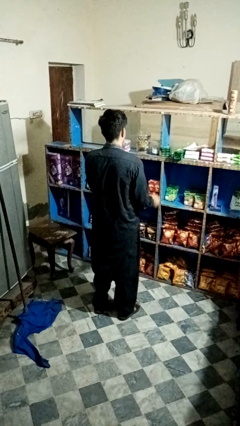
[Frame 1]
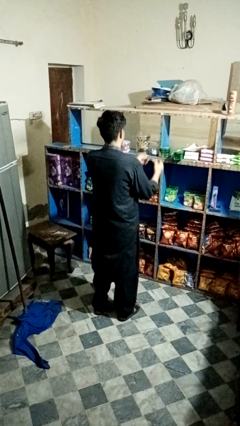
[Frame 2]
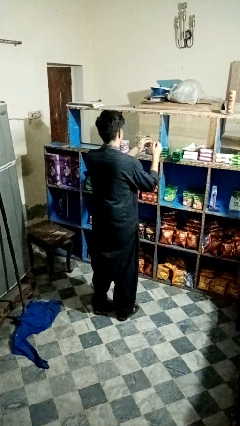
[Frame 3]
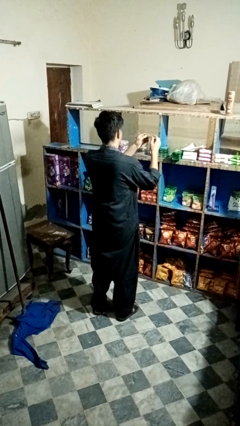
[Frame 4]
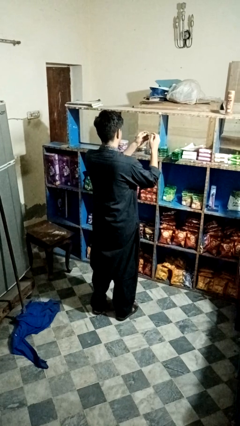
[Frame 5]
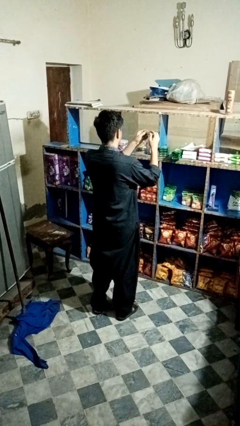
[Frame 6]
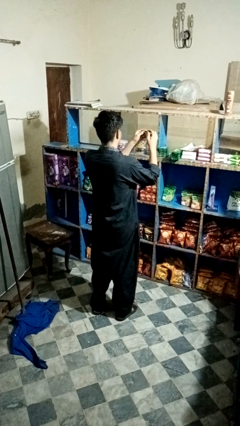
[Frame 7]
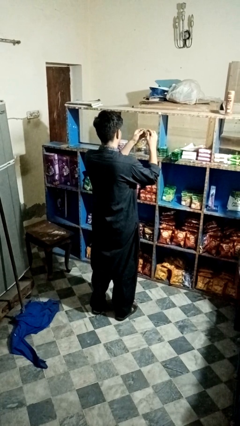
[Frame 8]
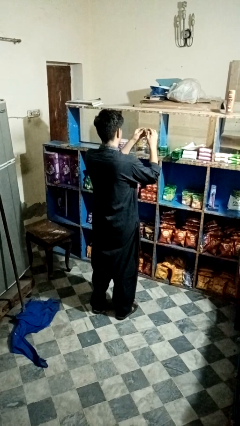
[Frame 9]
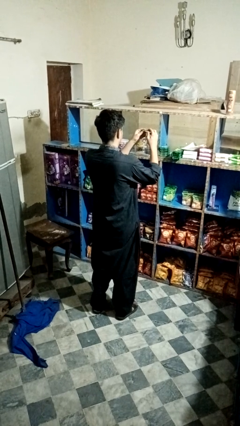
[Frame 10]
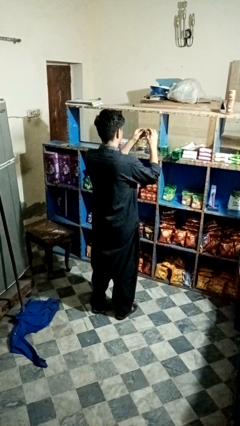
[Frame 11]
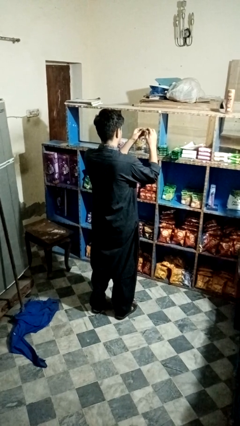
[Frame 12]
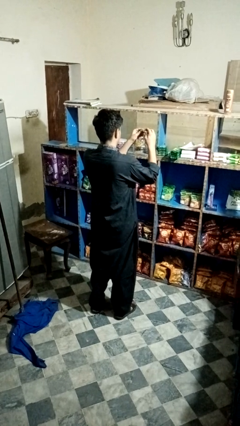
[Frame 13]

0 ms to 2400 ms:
person clips fingernails

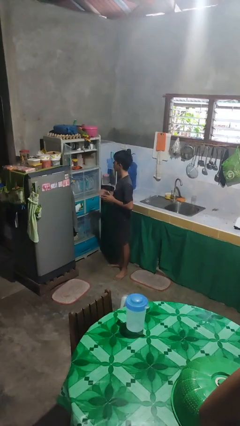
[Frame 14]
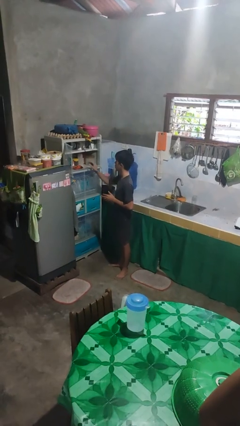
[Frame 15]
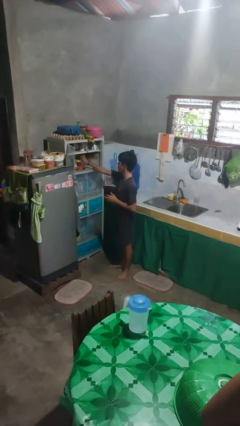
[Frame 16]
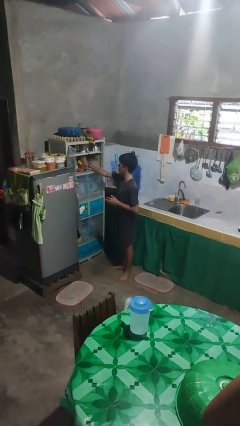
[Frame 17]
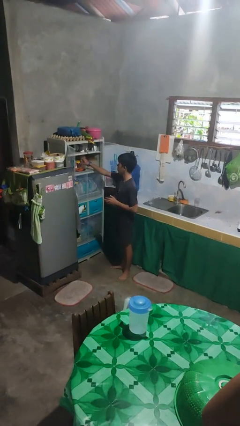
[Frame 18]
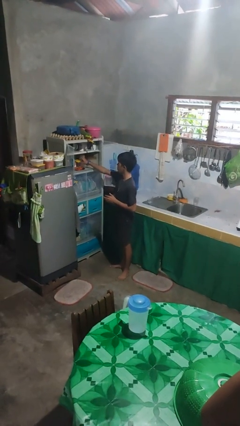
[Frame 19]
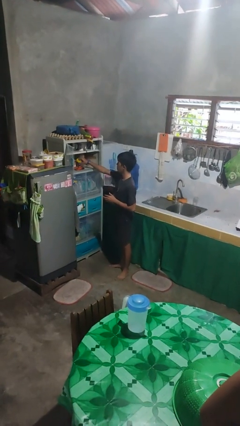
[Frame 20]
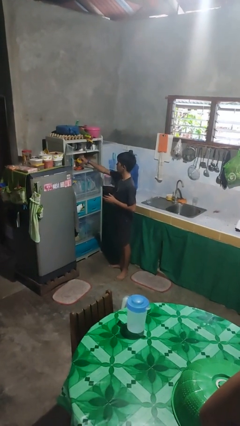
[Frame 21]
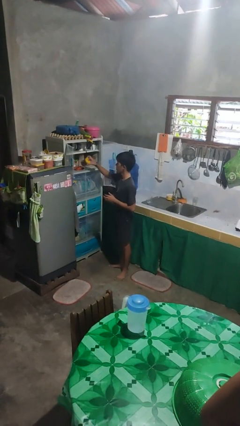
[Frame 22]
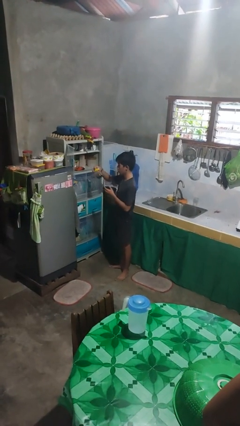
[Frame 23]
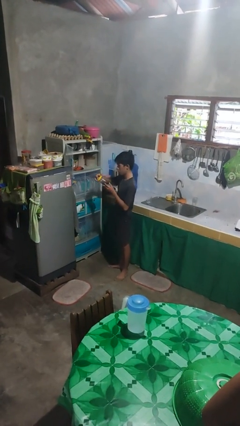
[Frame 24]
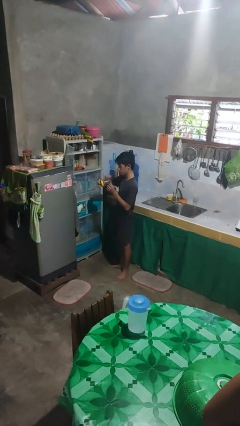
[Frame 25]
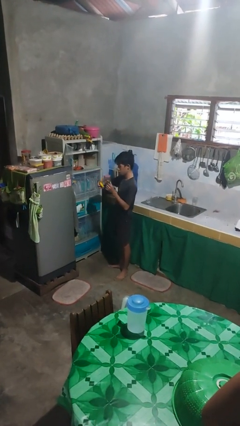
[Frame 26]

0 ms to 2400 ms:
person takes object from cabinet

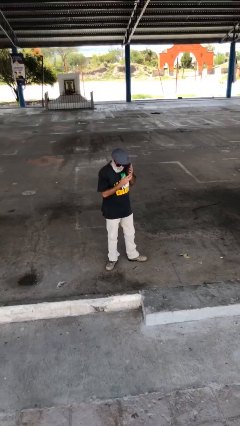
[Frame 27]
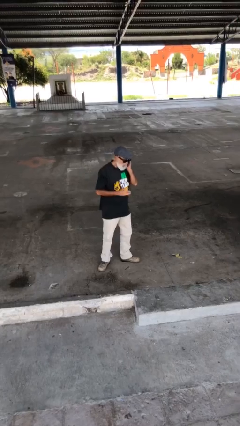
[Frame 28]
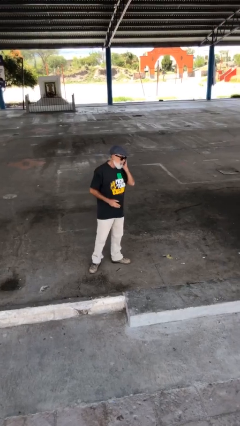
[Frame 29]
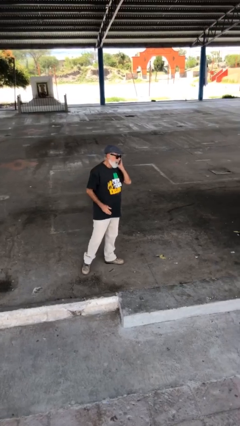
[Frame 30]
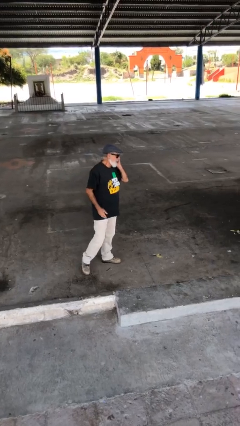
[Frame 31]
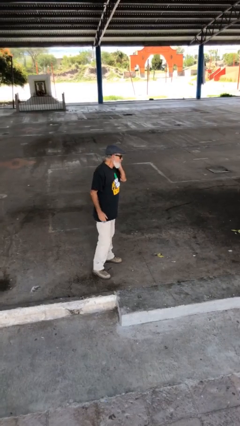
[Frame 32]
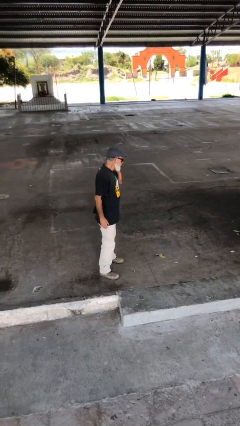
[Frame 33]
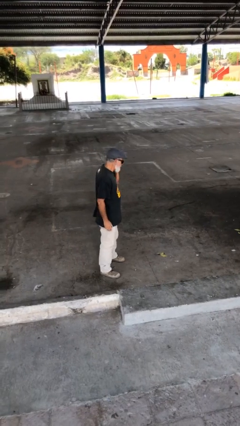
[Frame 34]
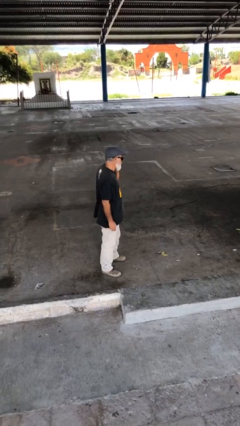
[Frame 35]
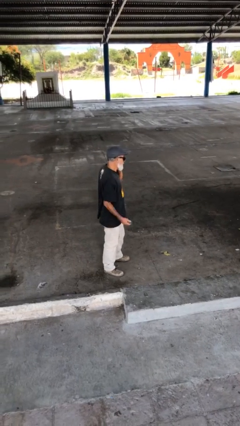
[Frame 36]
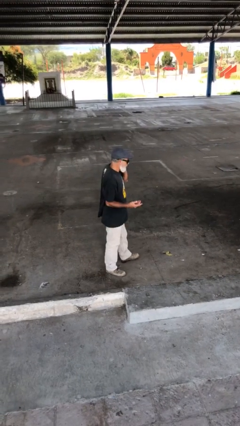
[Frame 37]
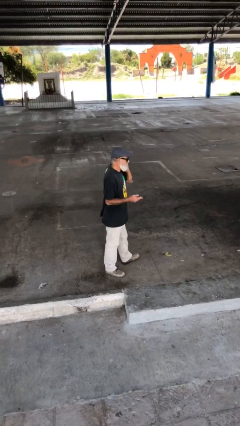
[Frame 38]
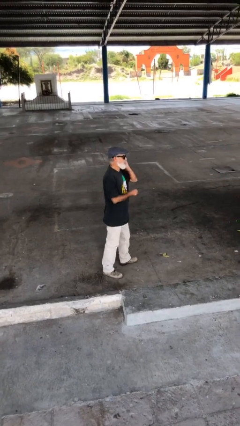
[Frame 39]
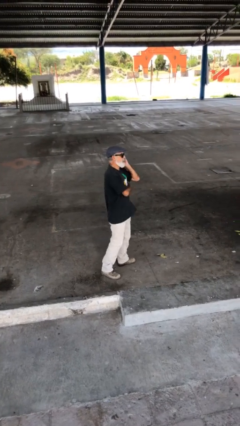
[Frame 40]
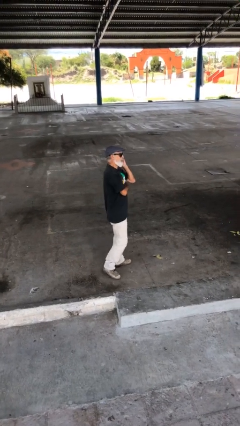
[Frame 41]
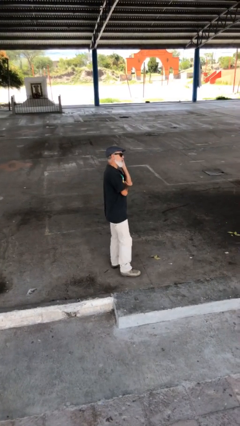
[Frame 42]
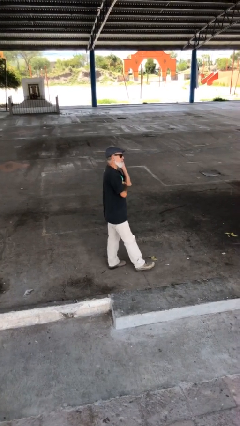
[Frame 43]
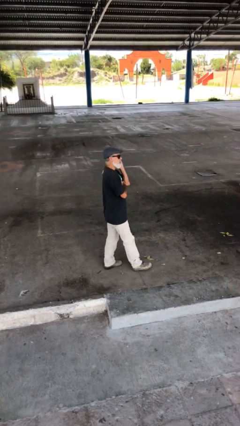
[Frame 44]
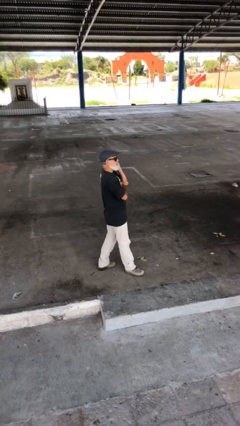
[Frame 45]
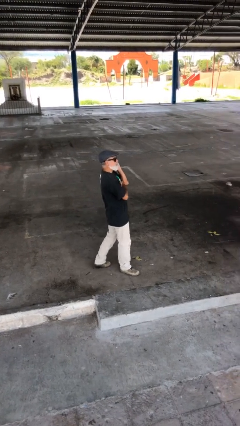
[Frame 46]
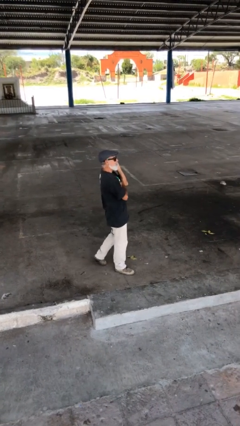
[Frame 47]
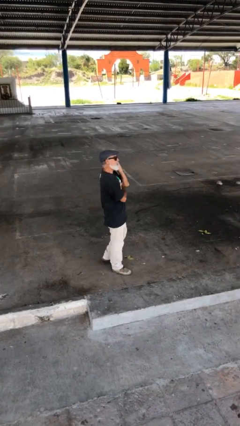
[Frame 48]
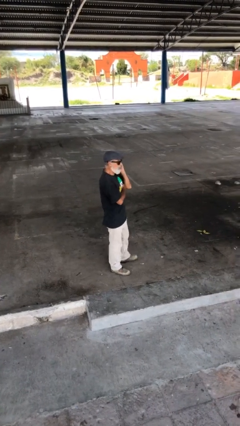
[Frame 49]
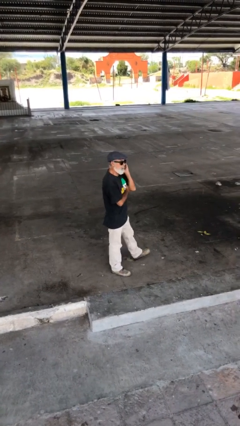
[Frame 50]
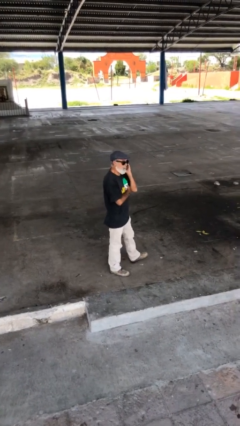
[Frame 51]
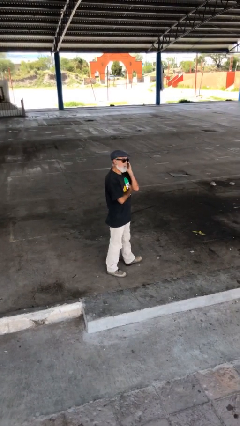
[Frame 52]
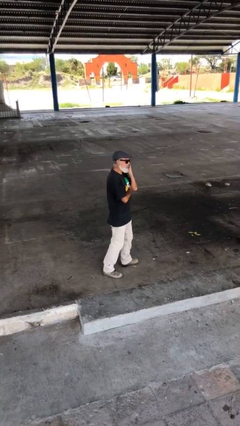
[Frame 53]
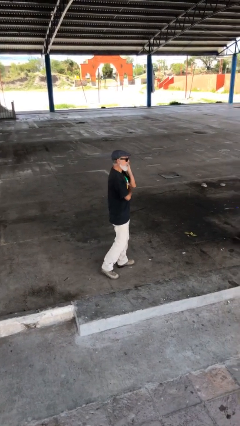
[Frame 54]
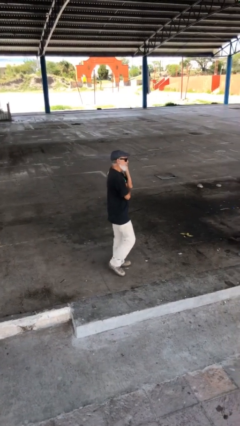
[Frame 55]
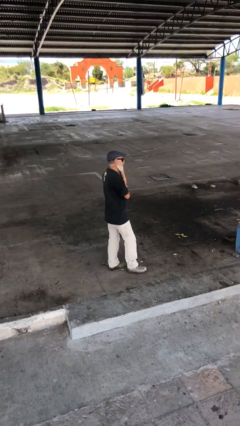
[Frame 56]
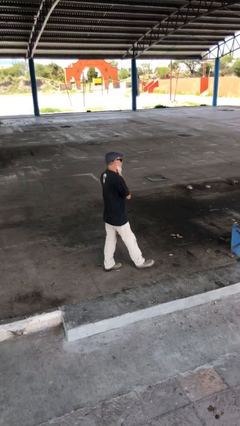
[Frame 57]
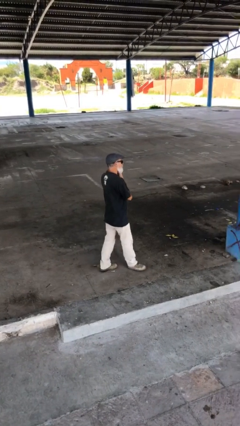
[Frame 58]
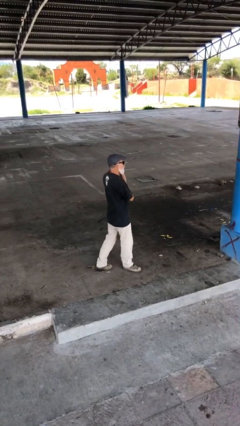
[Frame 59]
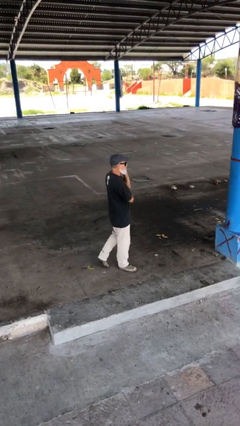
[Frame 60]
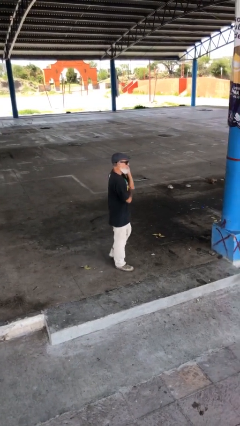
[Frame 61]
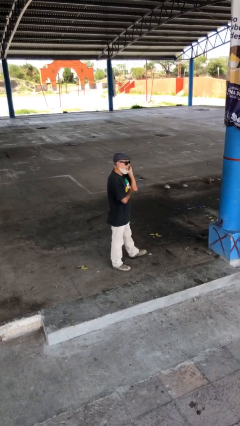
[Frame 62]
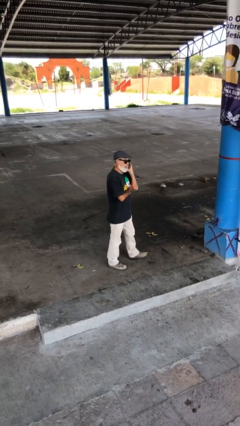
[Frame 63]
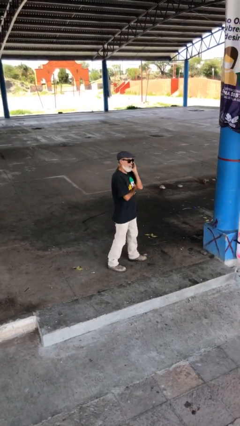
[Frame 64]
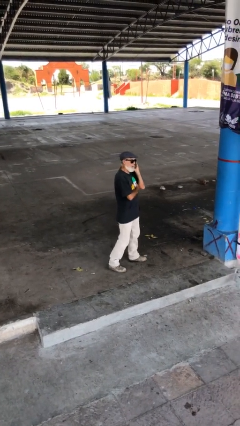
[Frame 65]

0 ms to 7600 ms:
person talks on phone

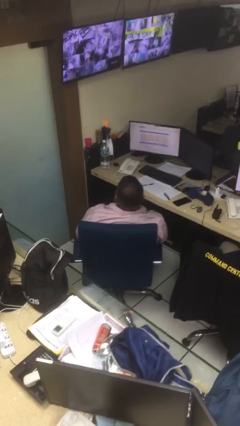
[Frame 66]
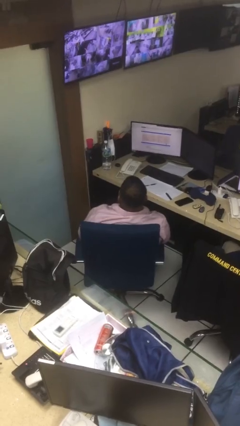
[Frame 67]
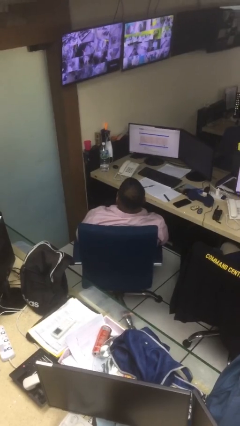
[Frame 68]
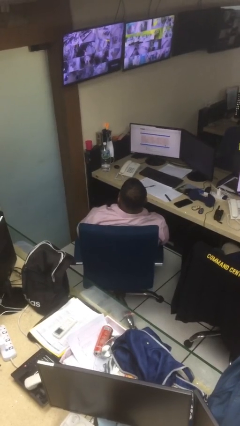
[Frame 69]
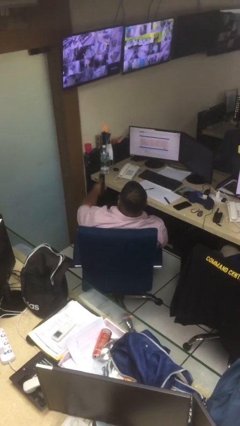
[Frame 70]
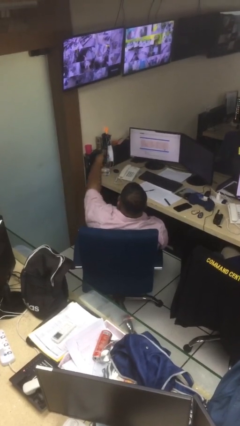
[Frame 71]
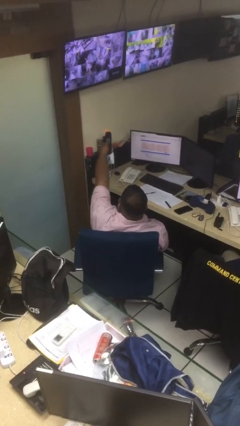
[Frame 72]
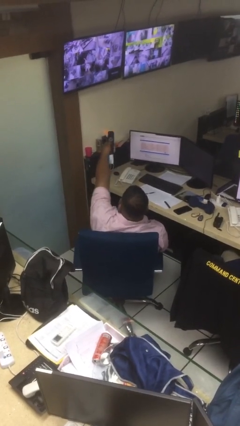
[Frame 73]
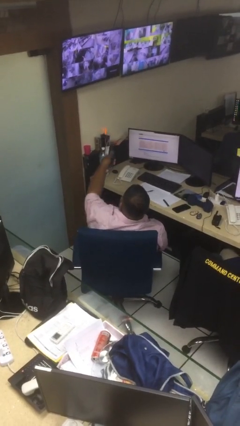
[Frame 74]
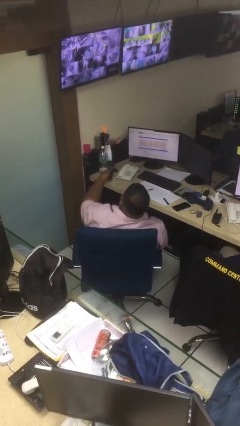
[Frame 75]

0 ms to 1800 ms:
person uses television remote

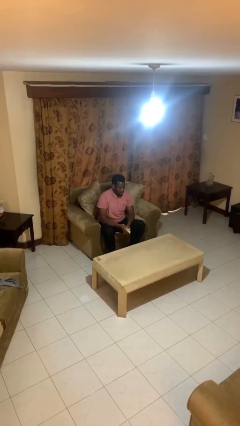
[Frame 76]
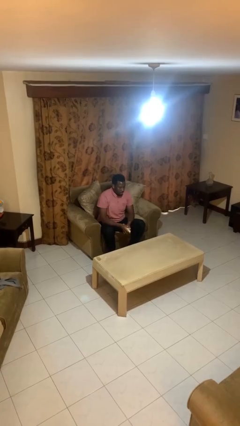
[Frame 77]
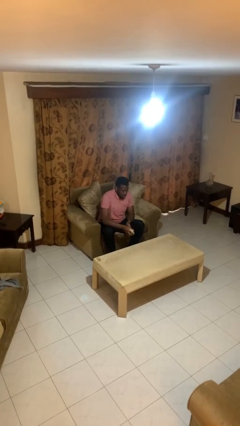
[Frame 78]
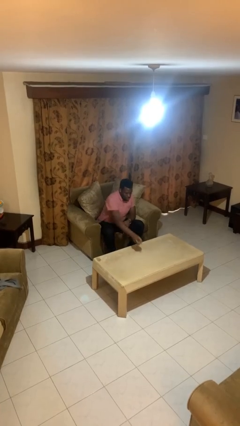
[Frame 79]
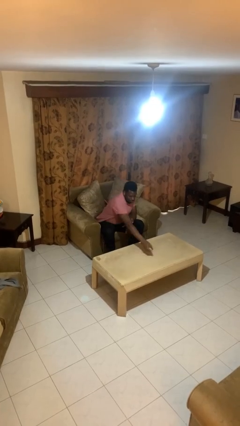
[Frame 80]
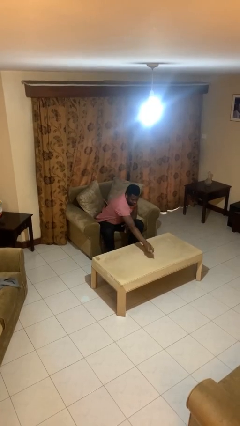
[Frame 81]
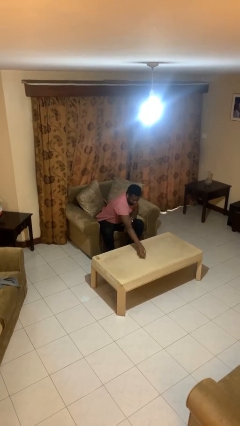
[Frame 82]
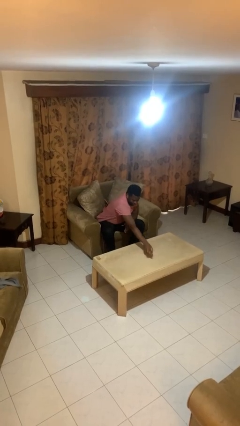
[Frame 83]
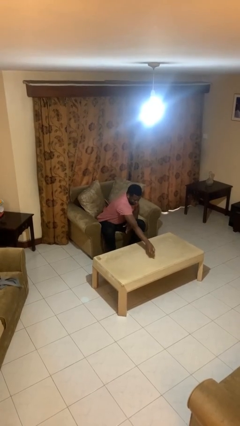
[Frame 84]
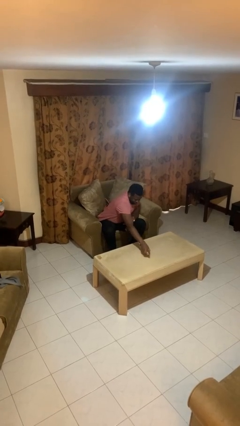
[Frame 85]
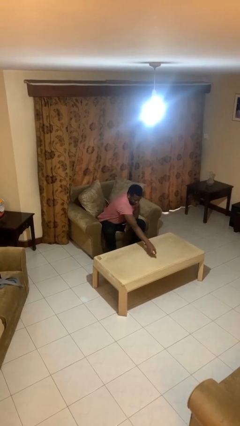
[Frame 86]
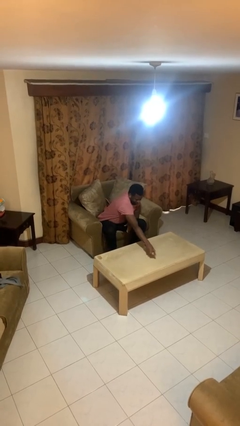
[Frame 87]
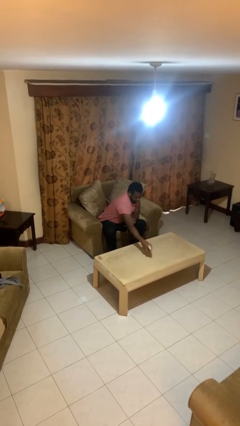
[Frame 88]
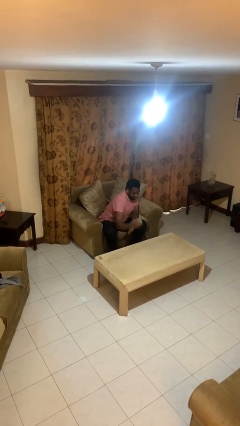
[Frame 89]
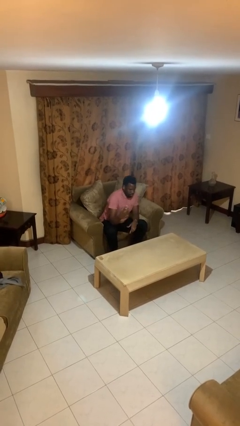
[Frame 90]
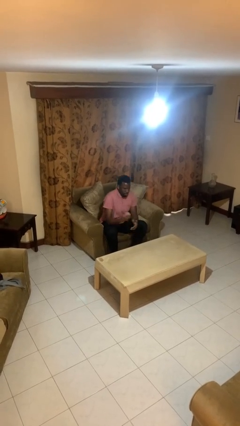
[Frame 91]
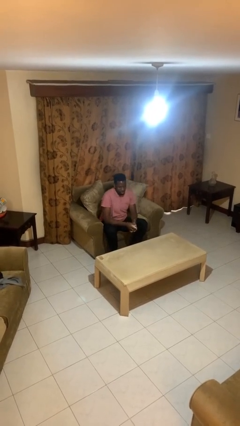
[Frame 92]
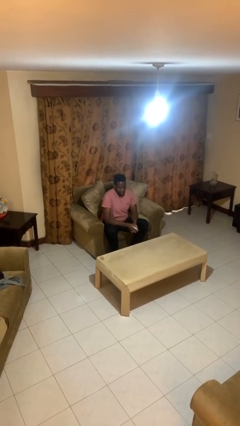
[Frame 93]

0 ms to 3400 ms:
person sprays from bottle
